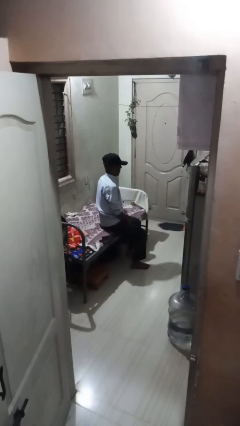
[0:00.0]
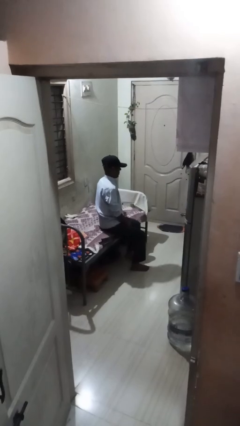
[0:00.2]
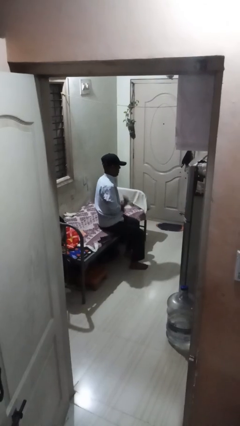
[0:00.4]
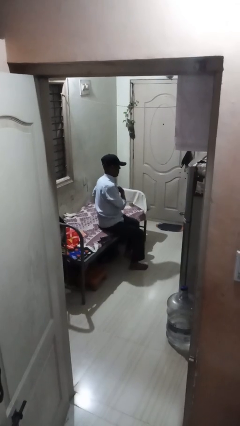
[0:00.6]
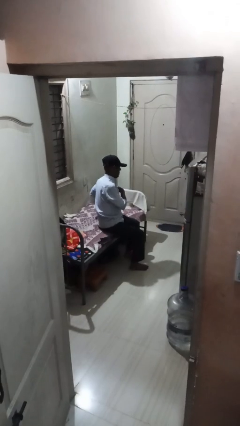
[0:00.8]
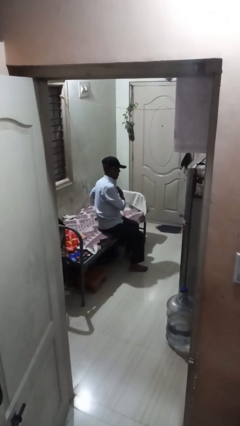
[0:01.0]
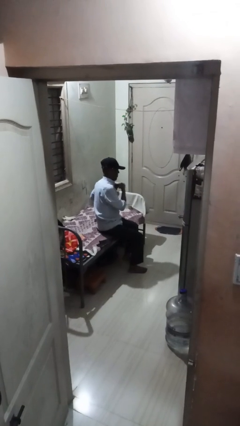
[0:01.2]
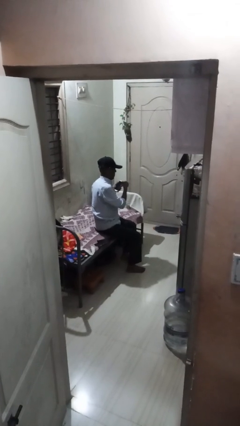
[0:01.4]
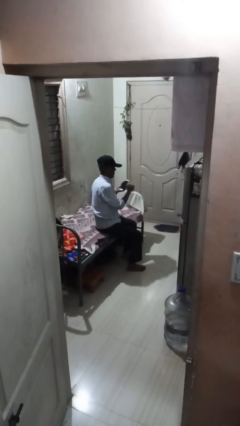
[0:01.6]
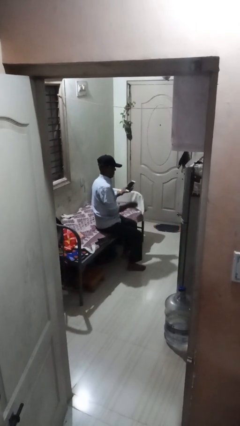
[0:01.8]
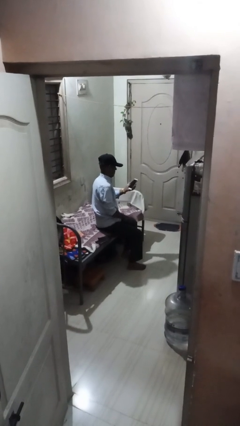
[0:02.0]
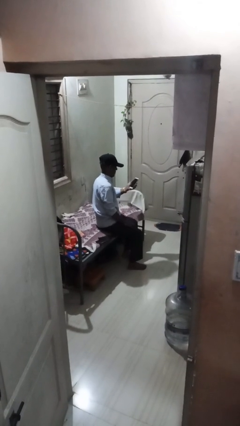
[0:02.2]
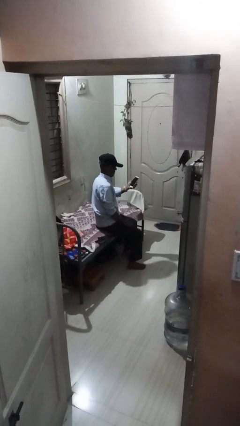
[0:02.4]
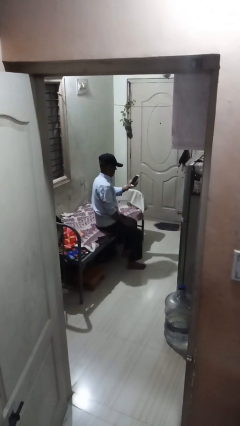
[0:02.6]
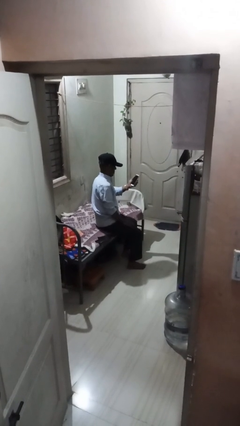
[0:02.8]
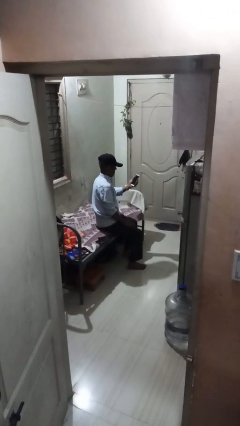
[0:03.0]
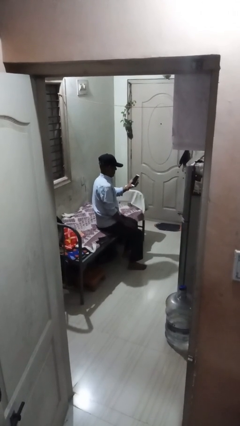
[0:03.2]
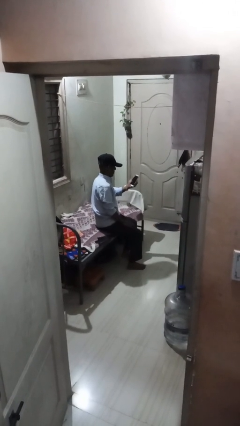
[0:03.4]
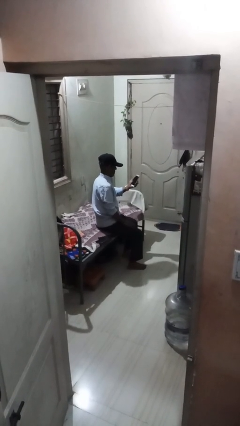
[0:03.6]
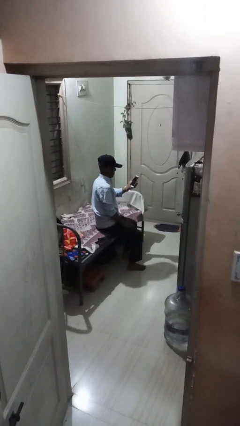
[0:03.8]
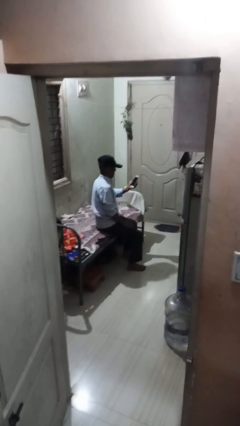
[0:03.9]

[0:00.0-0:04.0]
person takes phone from pocket

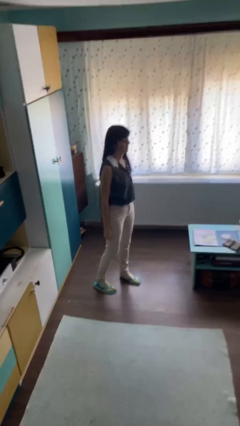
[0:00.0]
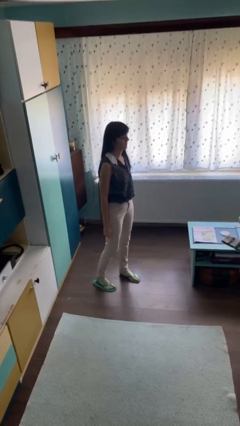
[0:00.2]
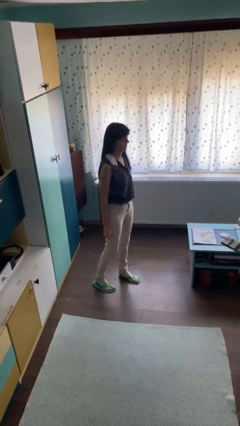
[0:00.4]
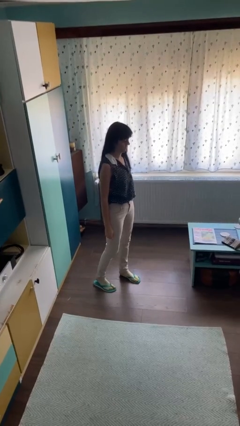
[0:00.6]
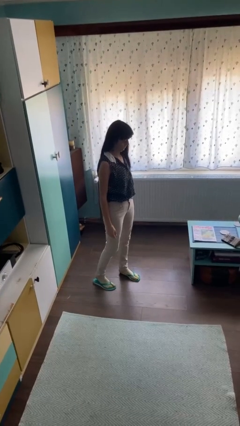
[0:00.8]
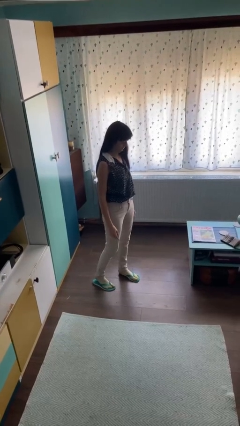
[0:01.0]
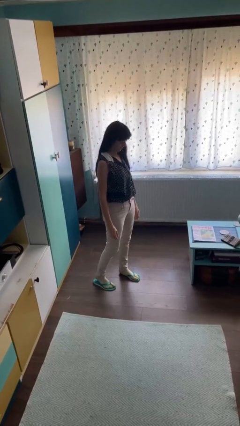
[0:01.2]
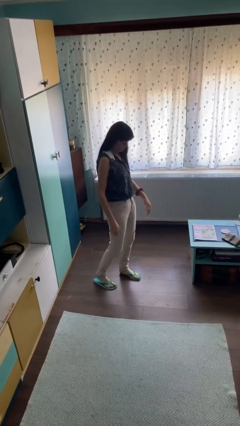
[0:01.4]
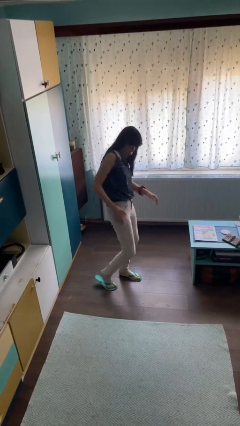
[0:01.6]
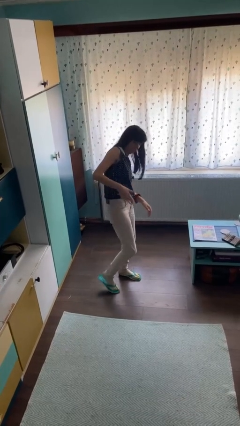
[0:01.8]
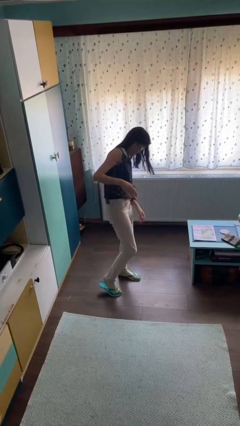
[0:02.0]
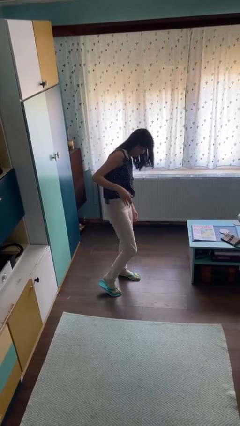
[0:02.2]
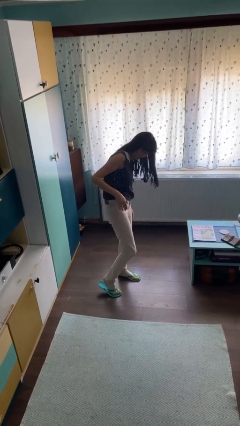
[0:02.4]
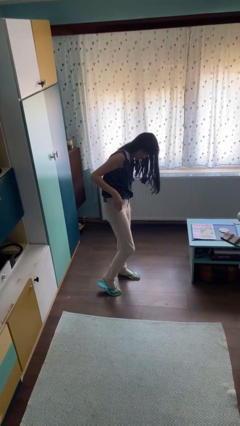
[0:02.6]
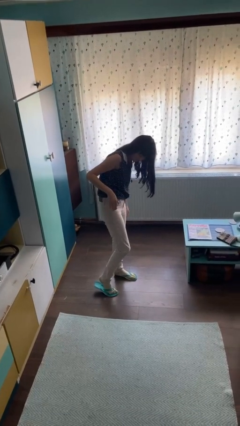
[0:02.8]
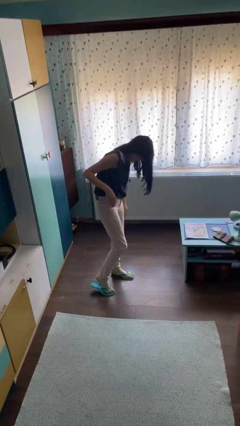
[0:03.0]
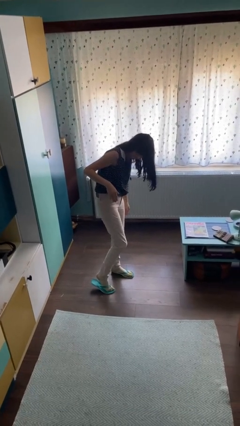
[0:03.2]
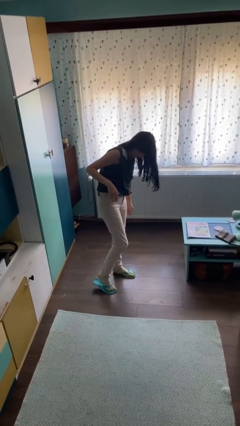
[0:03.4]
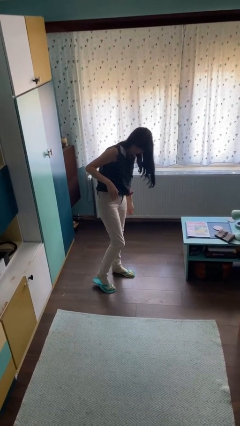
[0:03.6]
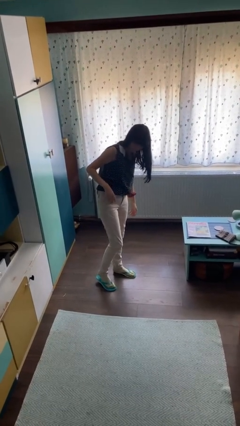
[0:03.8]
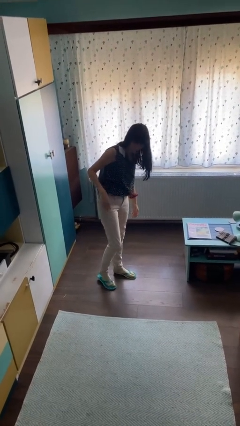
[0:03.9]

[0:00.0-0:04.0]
person swats bug

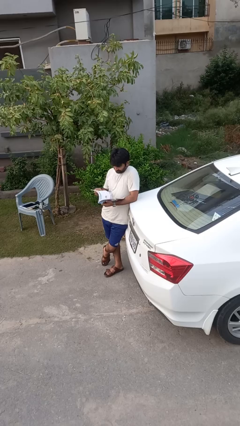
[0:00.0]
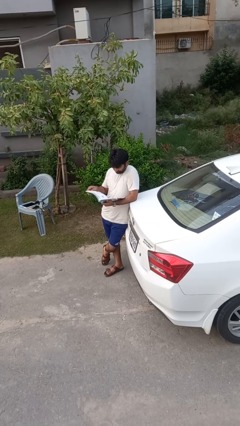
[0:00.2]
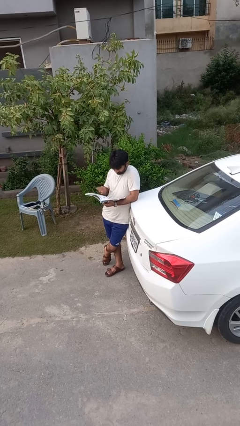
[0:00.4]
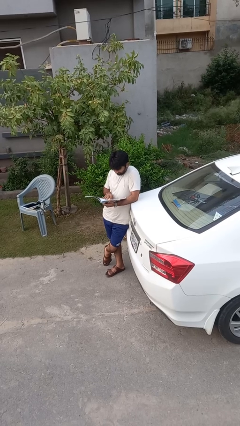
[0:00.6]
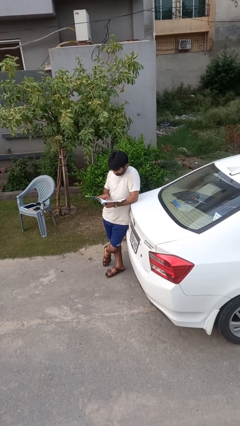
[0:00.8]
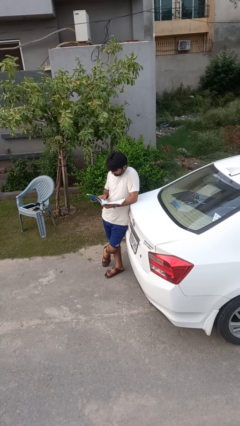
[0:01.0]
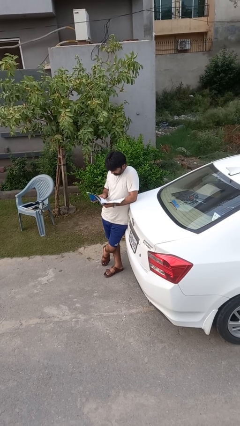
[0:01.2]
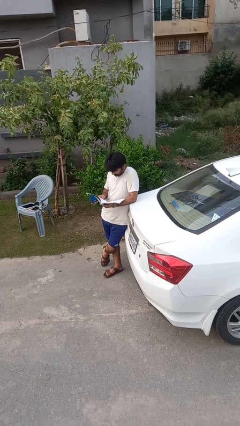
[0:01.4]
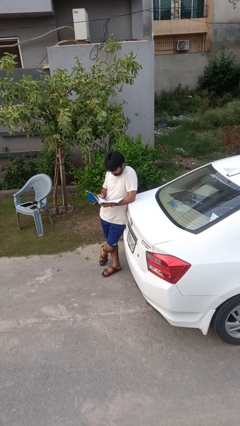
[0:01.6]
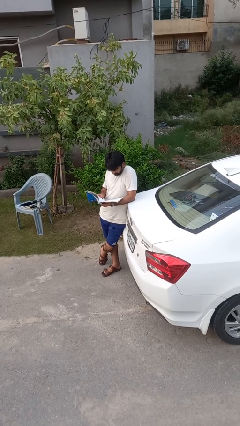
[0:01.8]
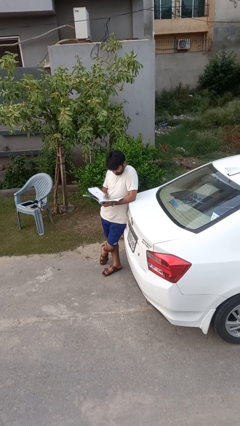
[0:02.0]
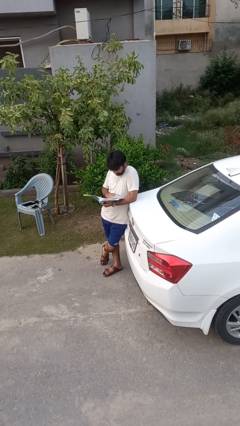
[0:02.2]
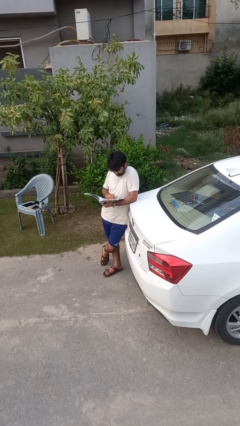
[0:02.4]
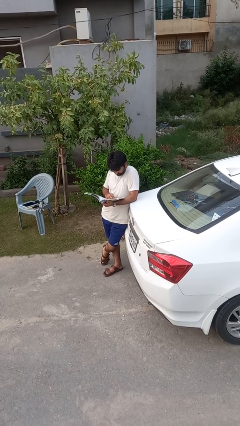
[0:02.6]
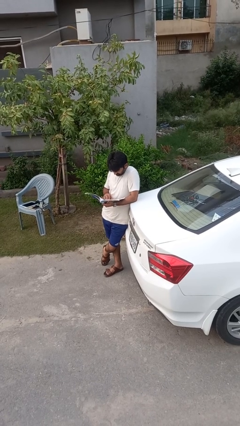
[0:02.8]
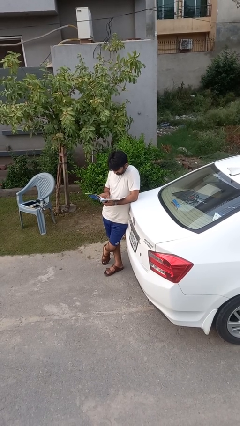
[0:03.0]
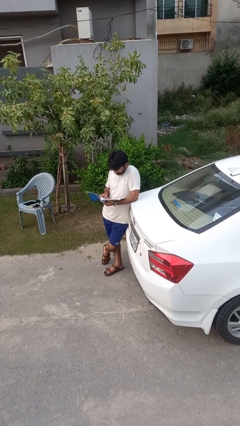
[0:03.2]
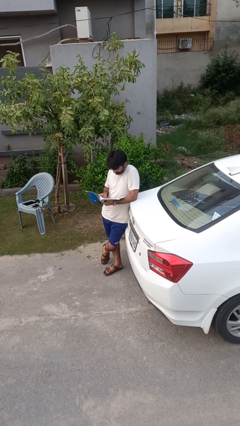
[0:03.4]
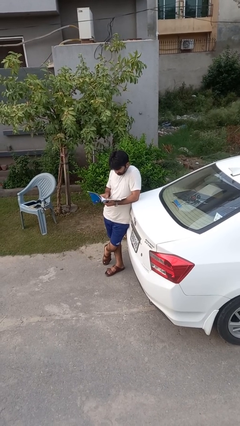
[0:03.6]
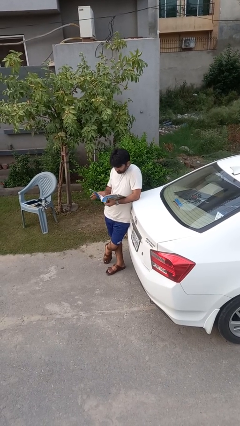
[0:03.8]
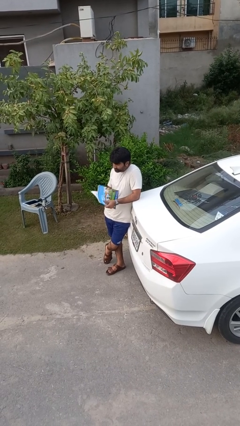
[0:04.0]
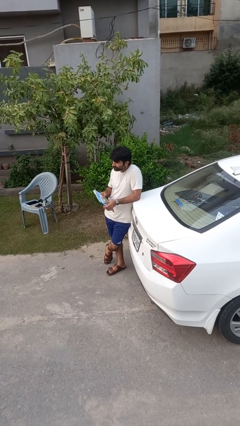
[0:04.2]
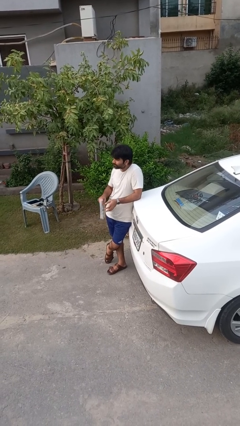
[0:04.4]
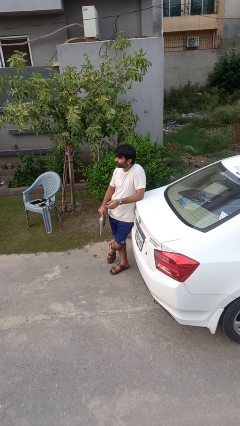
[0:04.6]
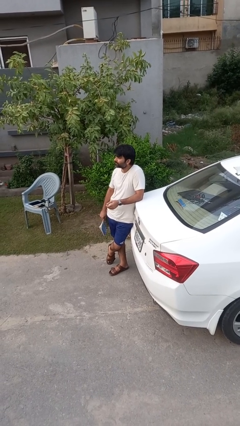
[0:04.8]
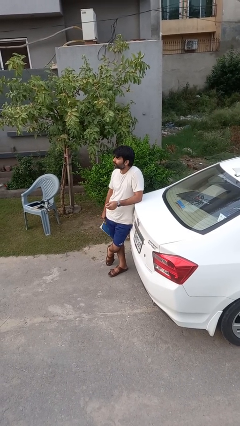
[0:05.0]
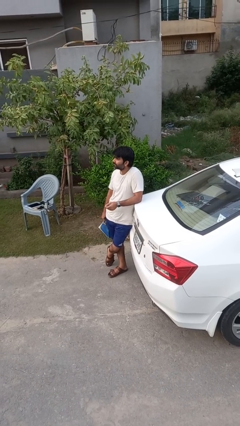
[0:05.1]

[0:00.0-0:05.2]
person reads book

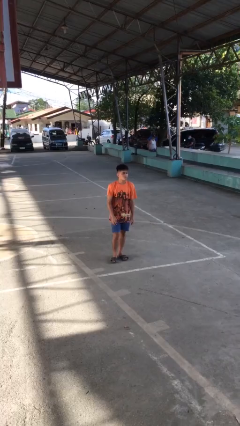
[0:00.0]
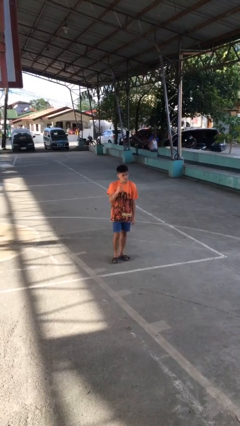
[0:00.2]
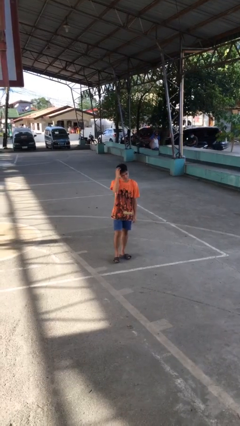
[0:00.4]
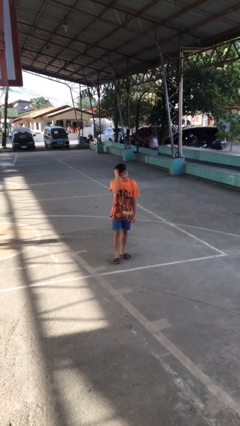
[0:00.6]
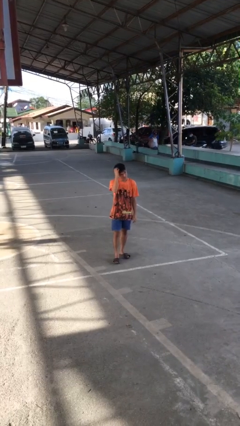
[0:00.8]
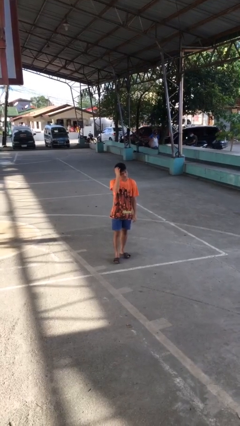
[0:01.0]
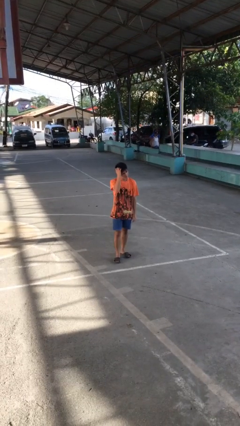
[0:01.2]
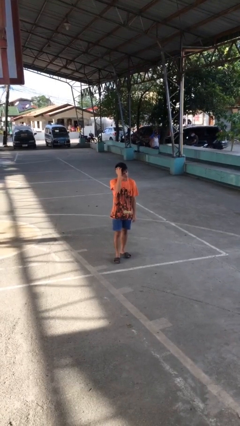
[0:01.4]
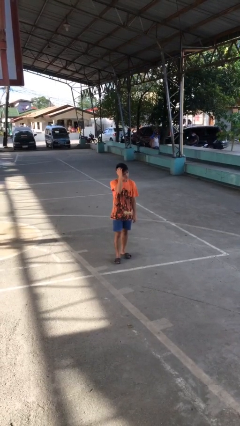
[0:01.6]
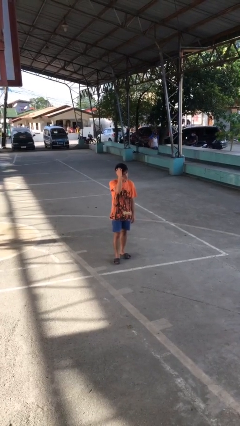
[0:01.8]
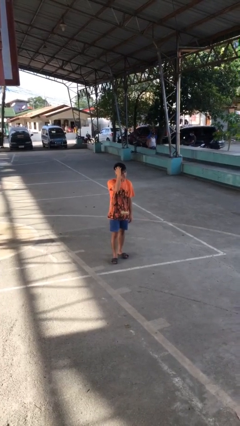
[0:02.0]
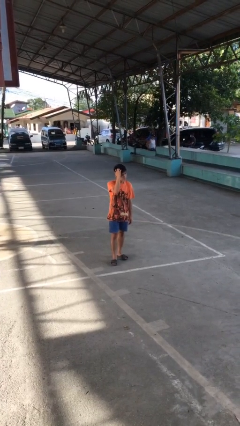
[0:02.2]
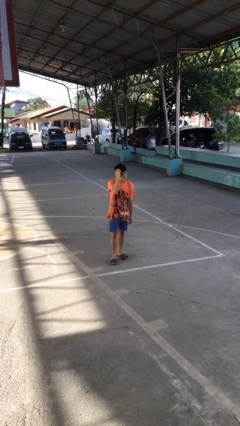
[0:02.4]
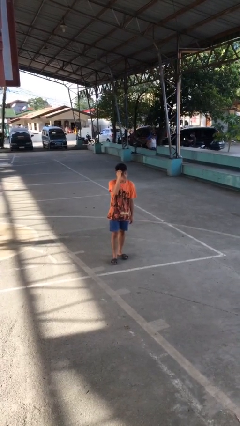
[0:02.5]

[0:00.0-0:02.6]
person scratches face

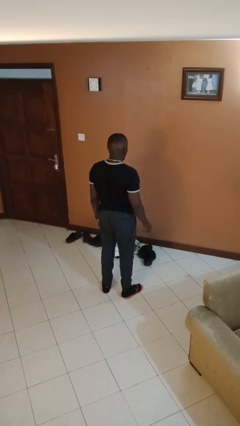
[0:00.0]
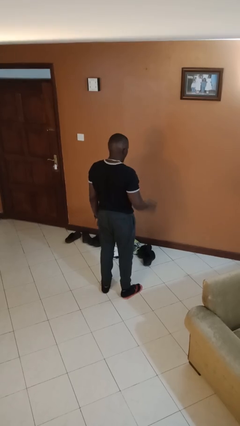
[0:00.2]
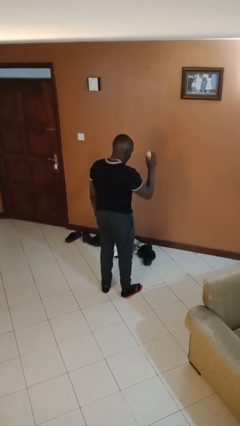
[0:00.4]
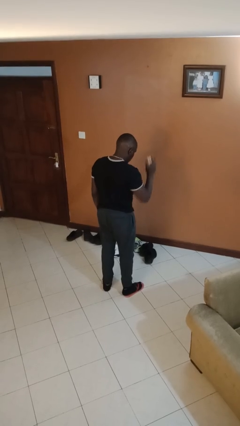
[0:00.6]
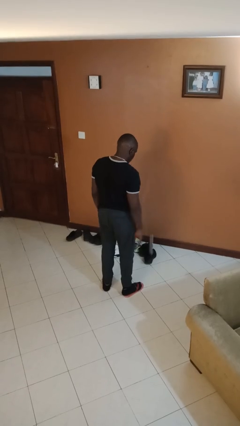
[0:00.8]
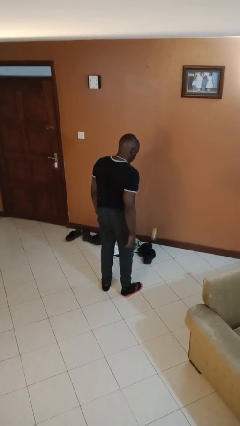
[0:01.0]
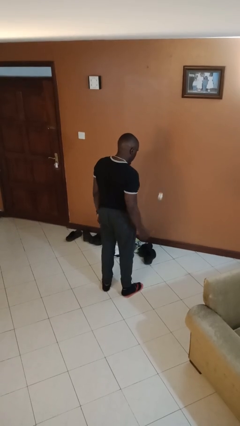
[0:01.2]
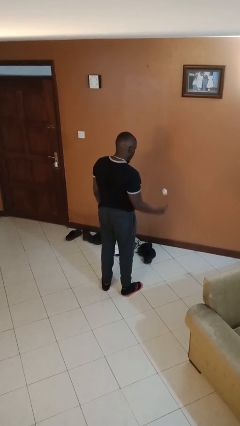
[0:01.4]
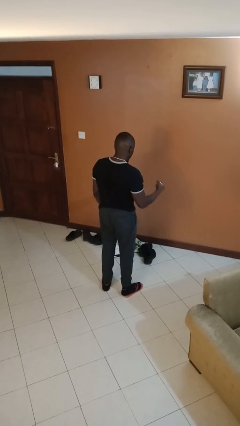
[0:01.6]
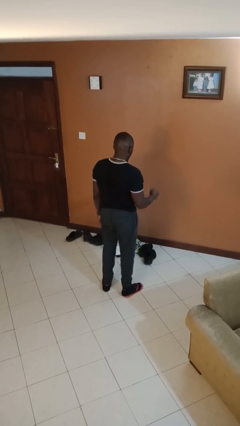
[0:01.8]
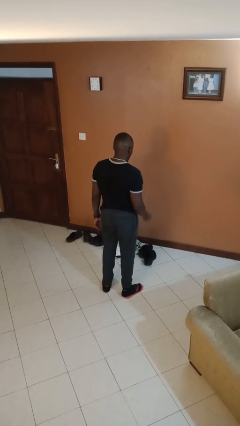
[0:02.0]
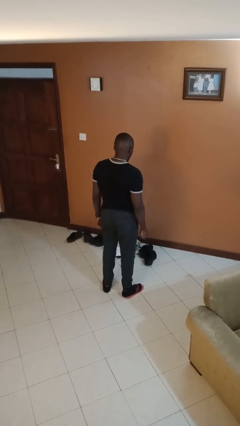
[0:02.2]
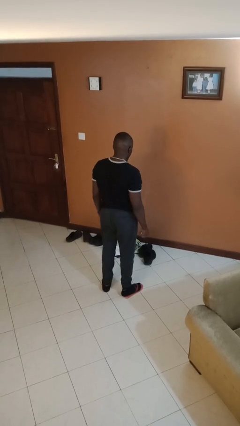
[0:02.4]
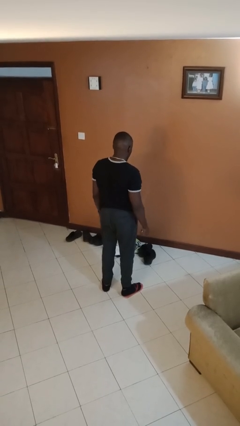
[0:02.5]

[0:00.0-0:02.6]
person bounces ball on floor
